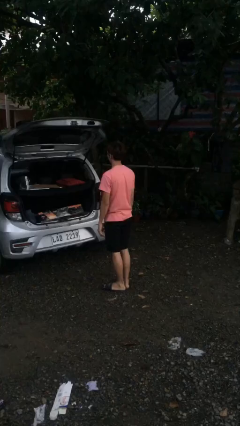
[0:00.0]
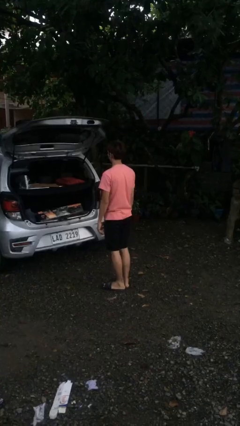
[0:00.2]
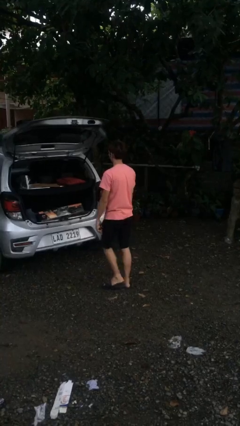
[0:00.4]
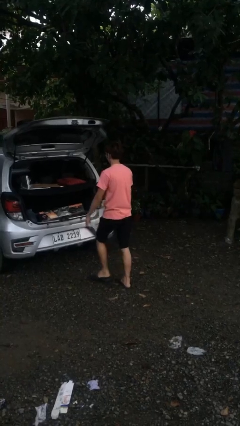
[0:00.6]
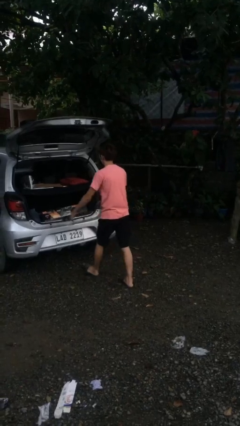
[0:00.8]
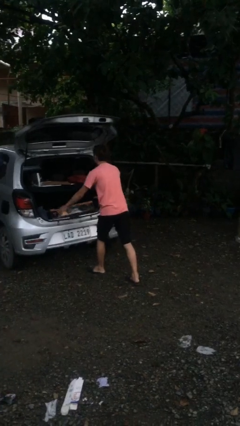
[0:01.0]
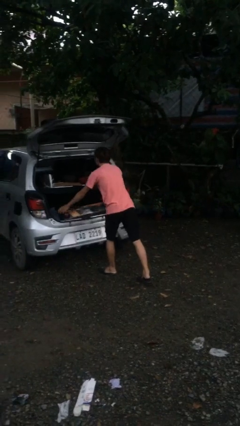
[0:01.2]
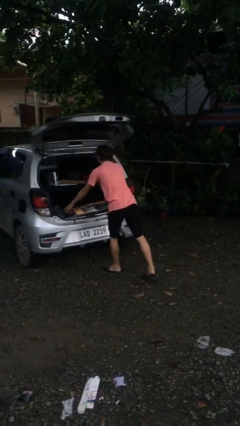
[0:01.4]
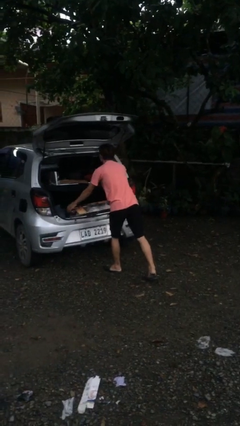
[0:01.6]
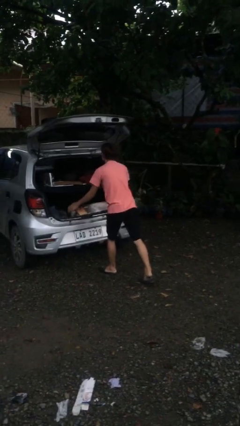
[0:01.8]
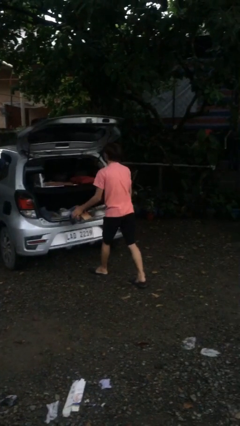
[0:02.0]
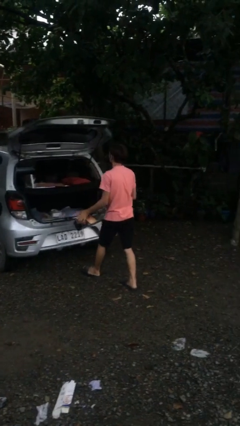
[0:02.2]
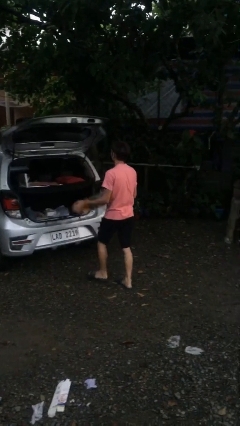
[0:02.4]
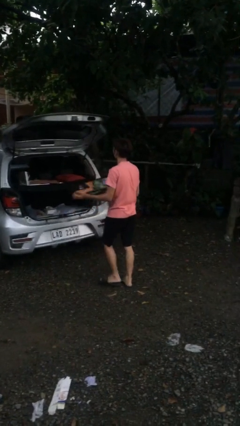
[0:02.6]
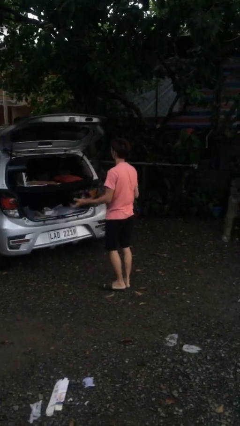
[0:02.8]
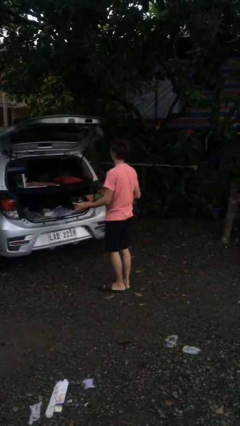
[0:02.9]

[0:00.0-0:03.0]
person unloads car

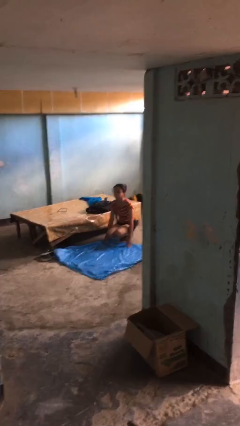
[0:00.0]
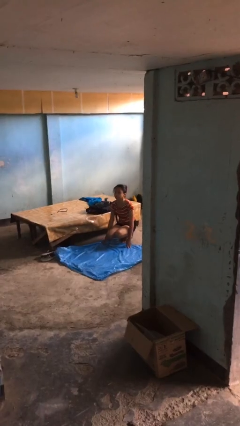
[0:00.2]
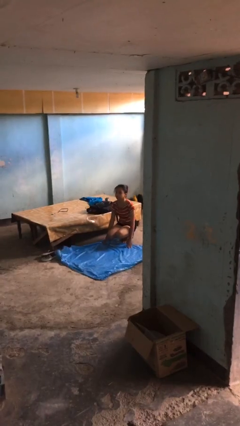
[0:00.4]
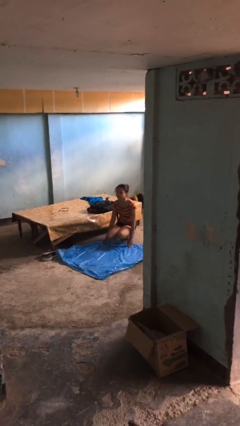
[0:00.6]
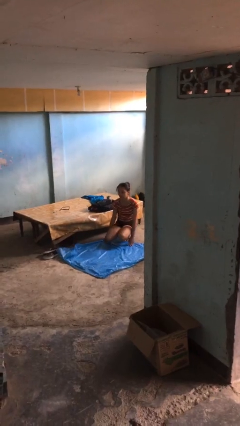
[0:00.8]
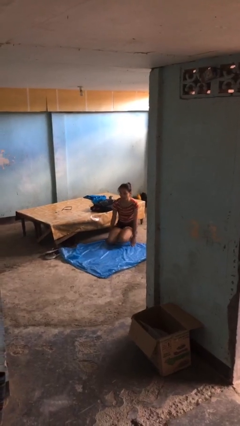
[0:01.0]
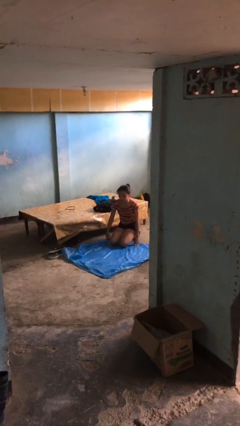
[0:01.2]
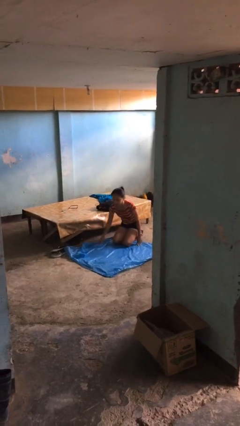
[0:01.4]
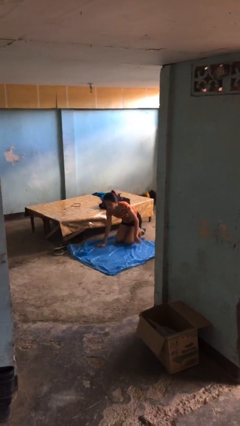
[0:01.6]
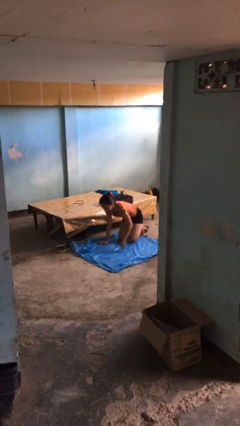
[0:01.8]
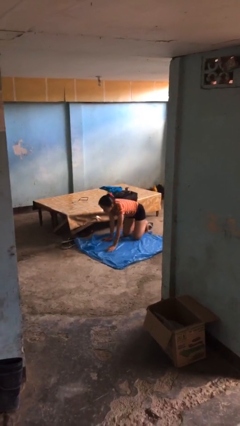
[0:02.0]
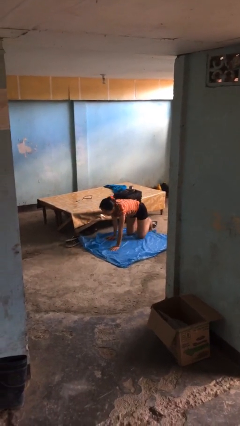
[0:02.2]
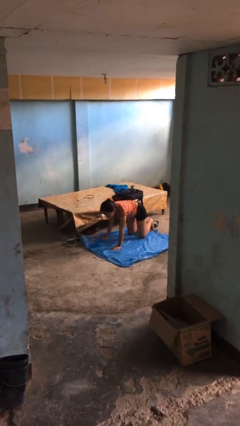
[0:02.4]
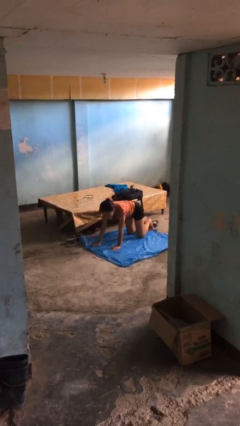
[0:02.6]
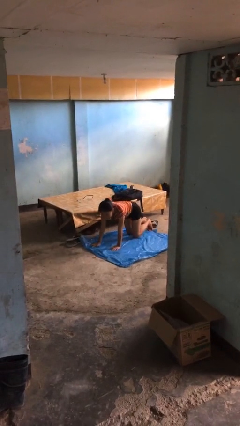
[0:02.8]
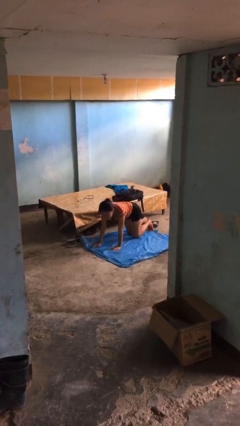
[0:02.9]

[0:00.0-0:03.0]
person crawls

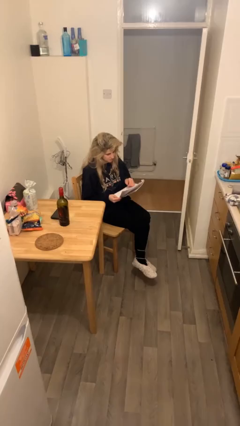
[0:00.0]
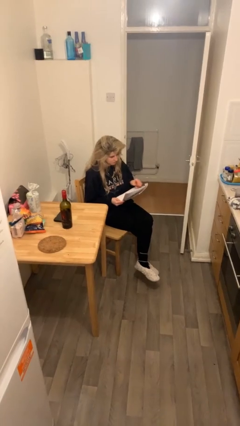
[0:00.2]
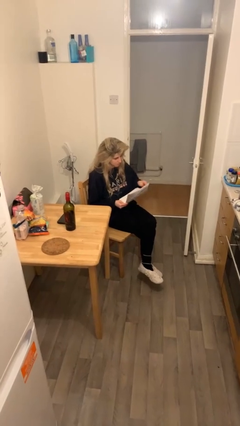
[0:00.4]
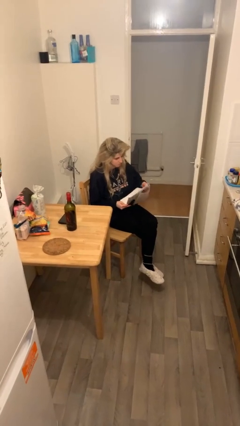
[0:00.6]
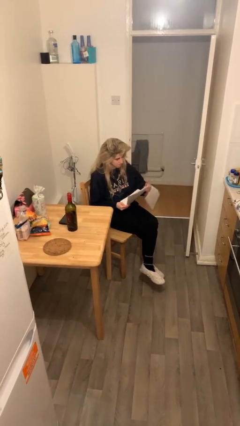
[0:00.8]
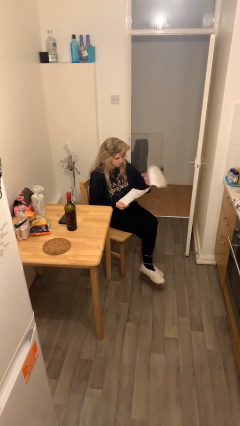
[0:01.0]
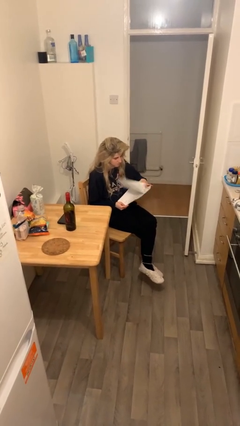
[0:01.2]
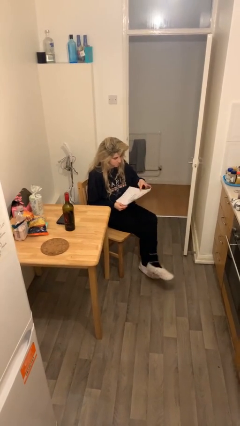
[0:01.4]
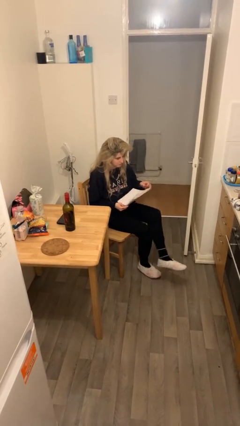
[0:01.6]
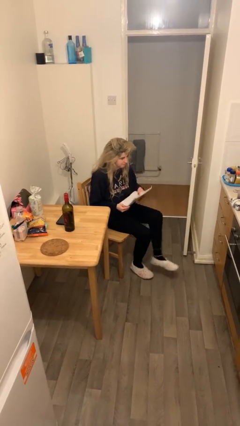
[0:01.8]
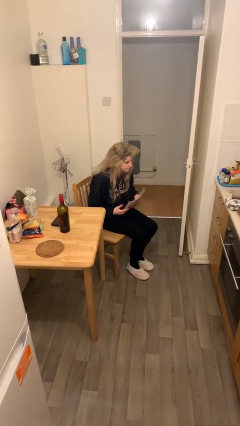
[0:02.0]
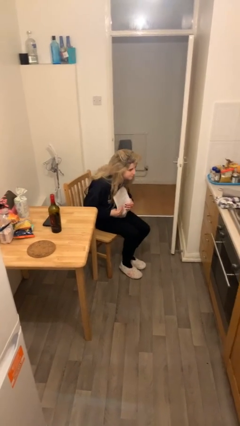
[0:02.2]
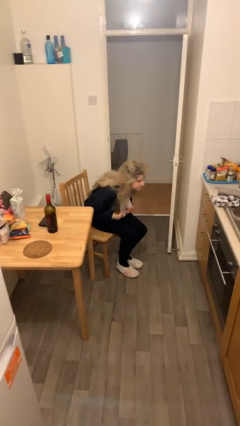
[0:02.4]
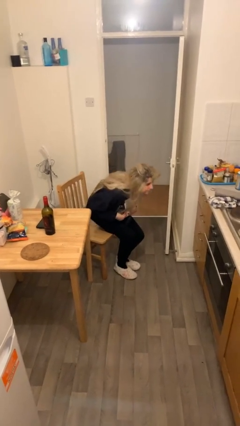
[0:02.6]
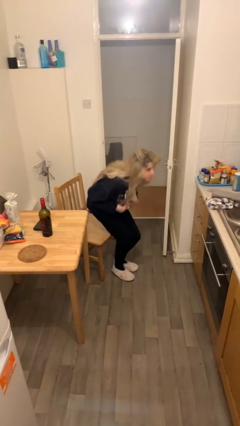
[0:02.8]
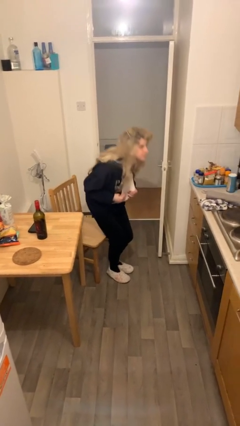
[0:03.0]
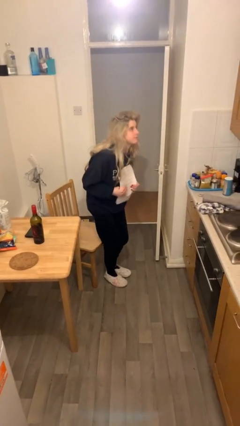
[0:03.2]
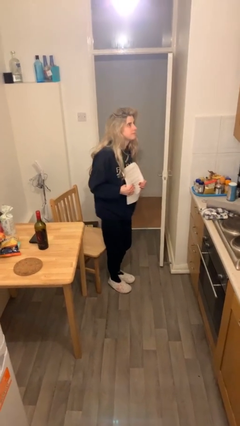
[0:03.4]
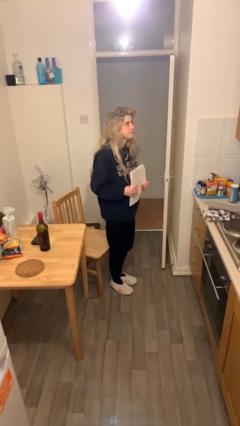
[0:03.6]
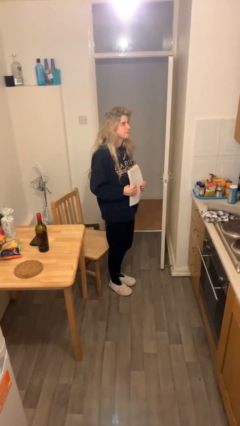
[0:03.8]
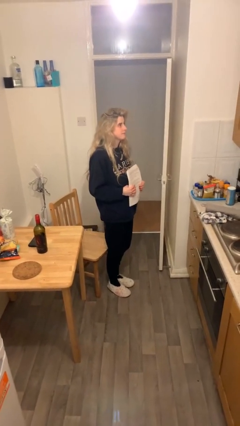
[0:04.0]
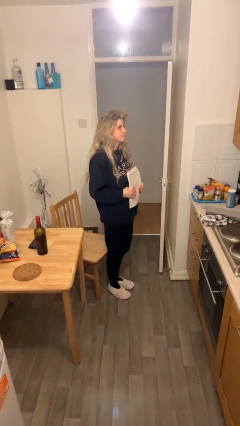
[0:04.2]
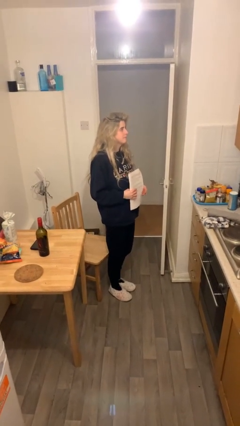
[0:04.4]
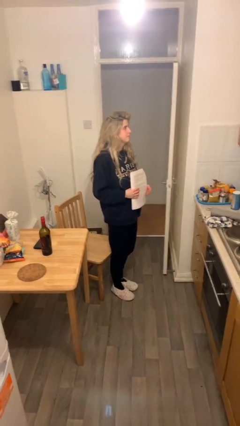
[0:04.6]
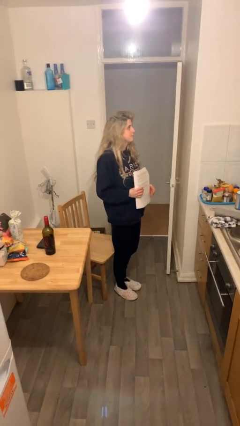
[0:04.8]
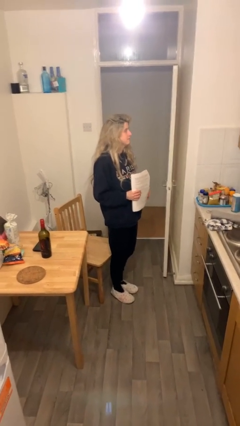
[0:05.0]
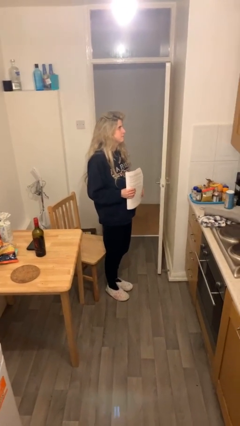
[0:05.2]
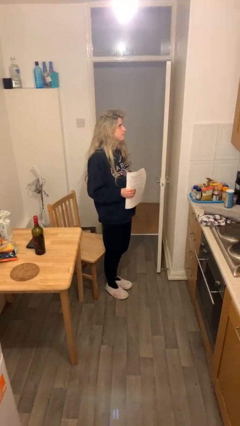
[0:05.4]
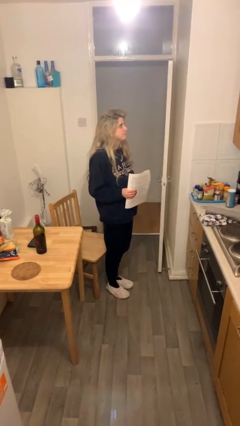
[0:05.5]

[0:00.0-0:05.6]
person stands up

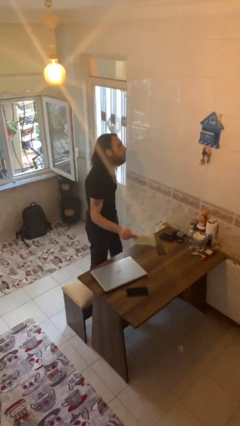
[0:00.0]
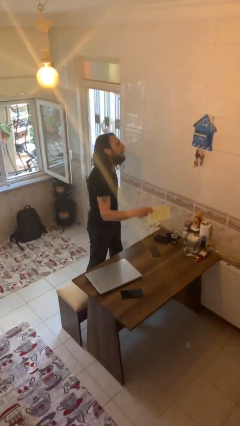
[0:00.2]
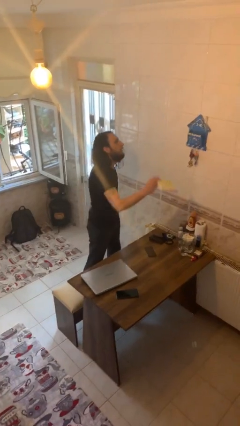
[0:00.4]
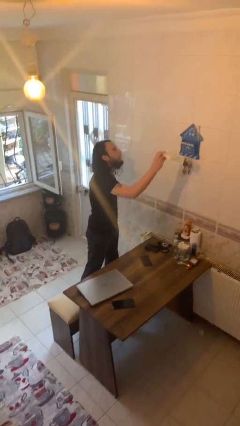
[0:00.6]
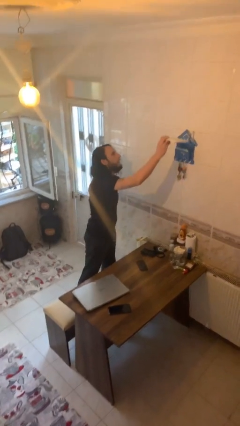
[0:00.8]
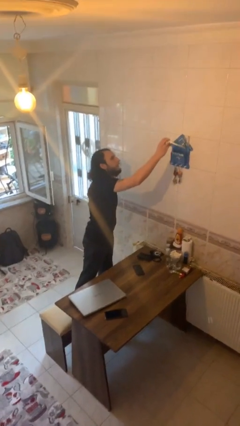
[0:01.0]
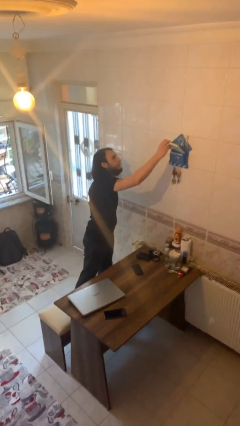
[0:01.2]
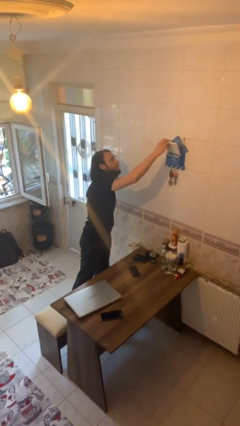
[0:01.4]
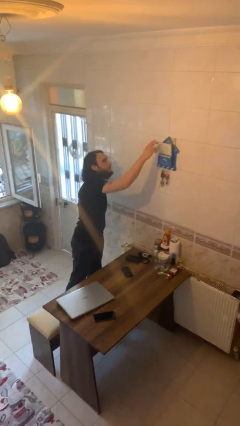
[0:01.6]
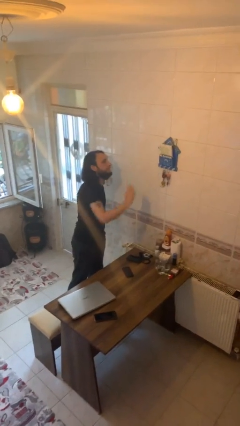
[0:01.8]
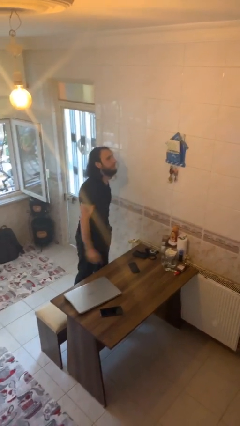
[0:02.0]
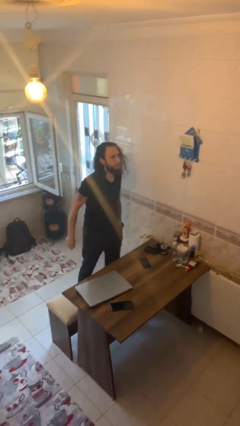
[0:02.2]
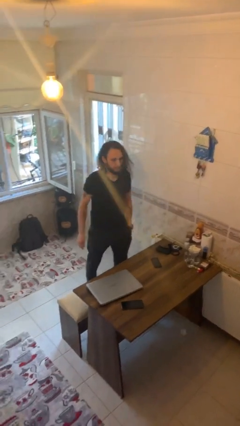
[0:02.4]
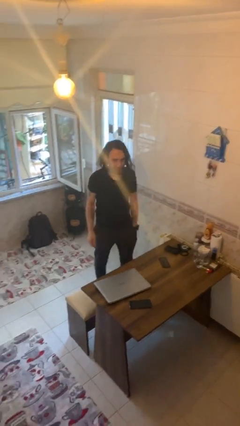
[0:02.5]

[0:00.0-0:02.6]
person puts down object on shelf

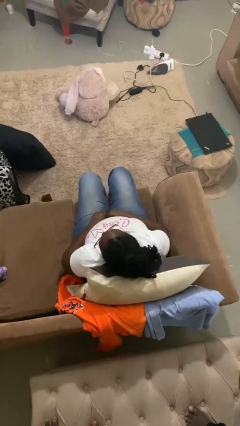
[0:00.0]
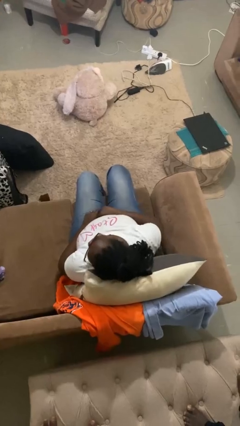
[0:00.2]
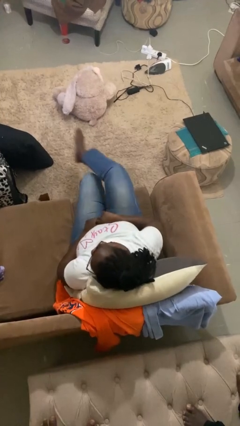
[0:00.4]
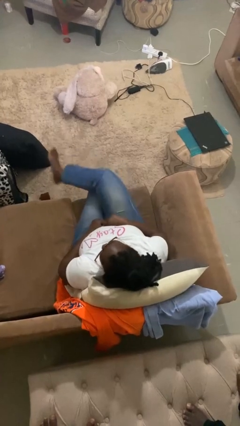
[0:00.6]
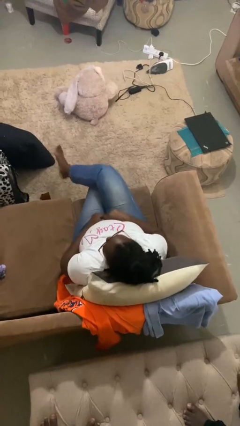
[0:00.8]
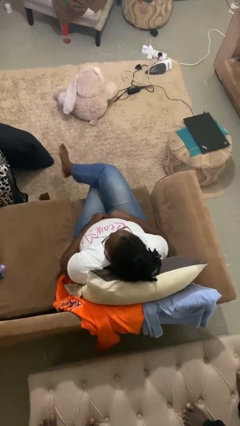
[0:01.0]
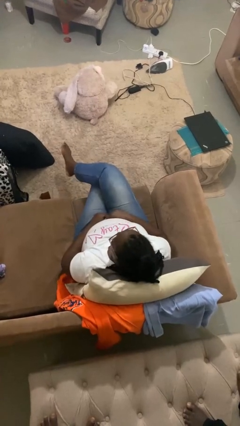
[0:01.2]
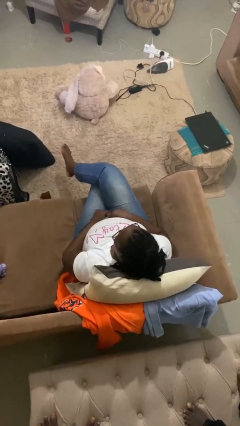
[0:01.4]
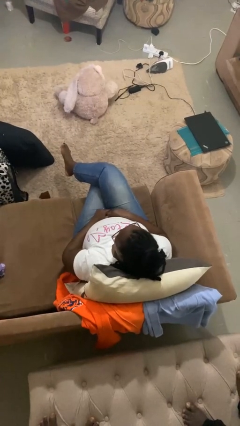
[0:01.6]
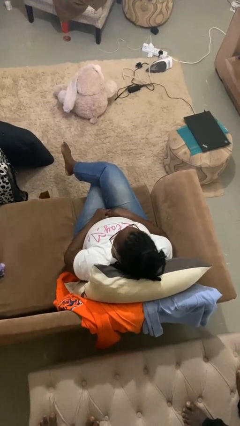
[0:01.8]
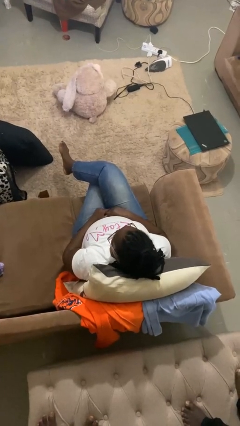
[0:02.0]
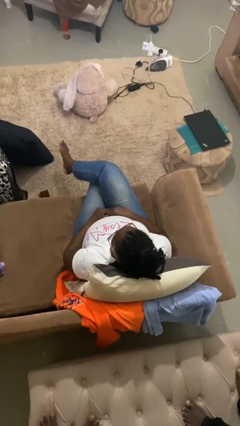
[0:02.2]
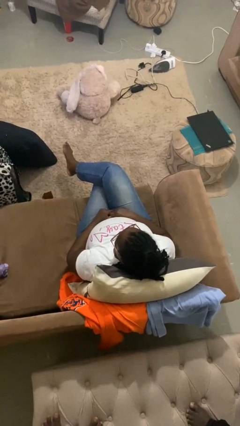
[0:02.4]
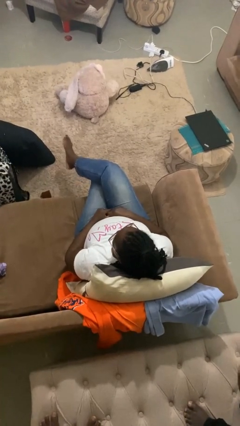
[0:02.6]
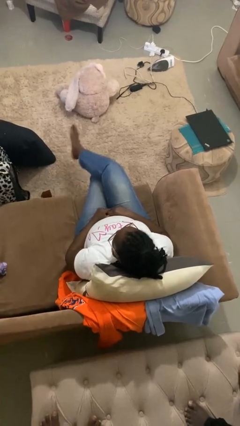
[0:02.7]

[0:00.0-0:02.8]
person crosses legs

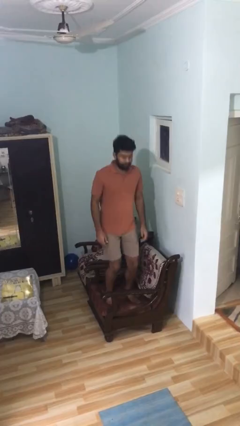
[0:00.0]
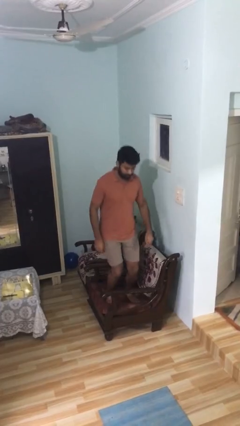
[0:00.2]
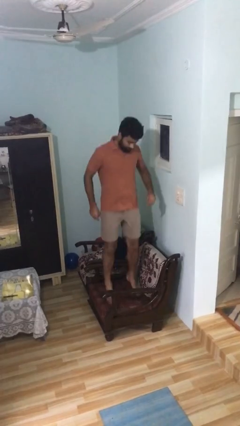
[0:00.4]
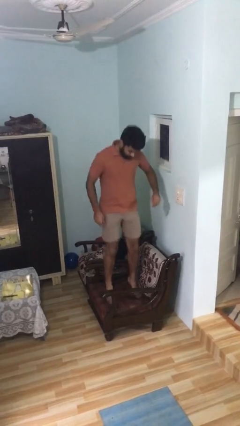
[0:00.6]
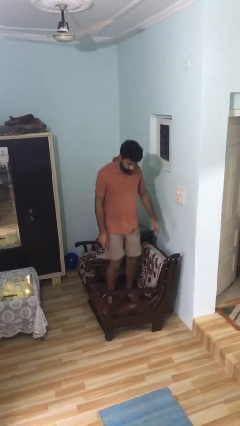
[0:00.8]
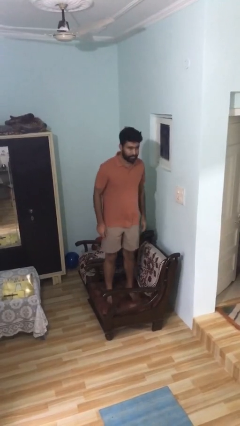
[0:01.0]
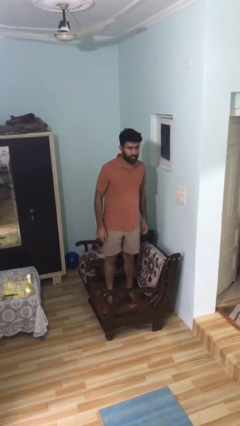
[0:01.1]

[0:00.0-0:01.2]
person jumps on couch
